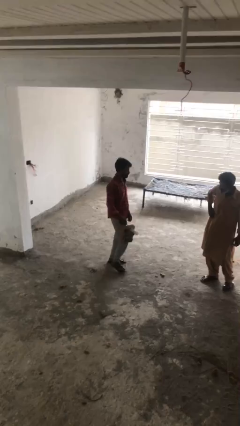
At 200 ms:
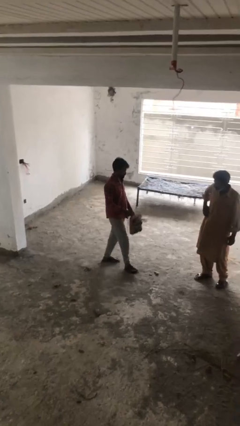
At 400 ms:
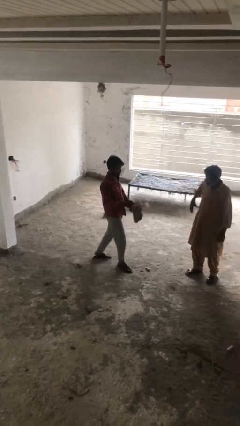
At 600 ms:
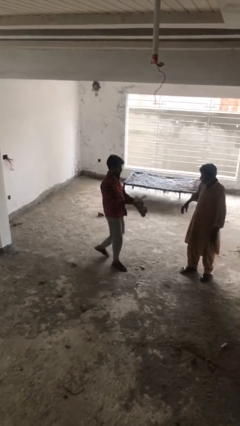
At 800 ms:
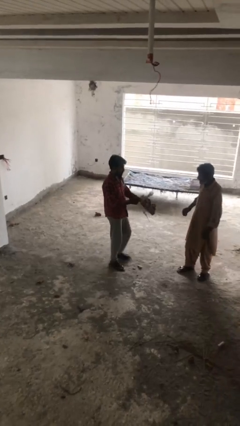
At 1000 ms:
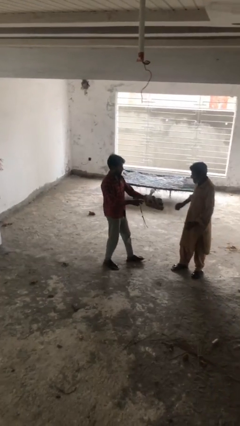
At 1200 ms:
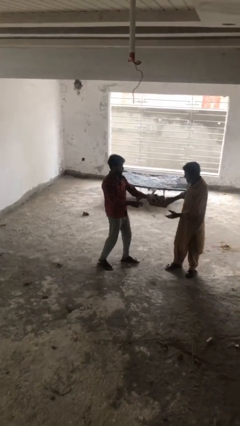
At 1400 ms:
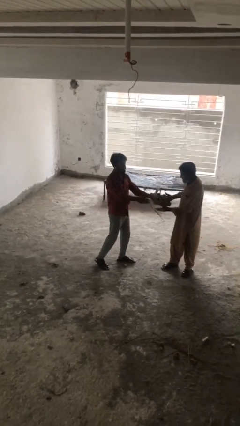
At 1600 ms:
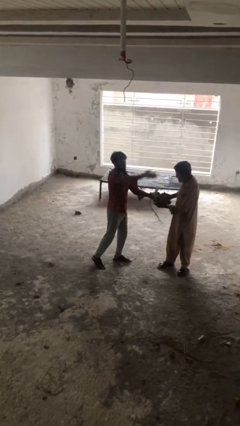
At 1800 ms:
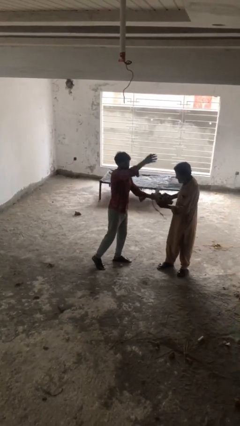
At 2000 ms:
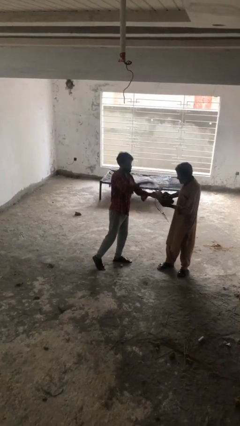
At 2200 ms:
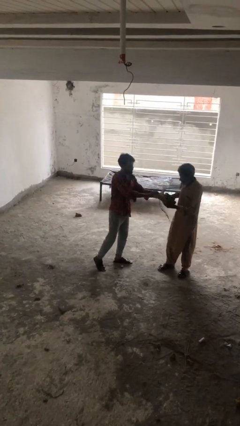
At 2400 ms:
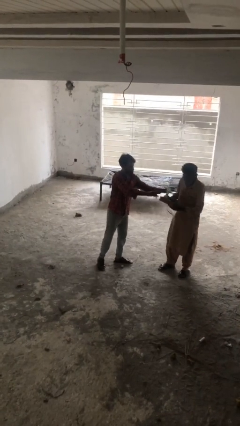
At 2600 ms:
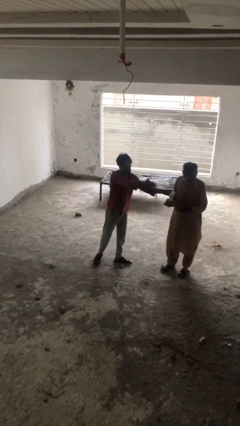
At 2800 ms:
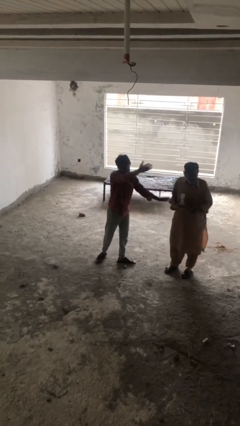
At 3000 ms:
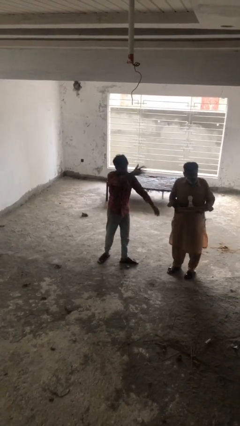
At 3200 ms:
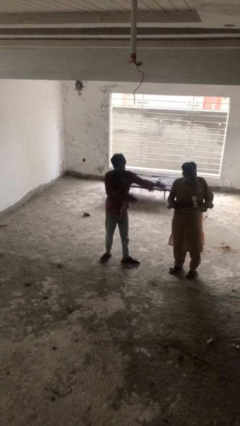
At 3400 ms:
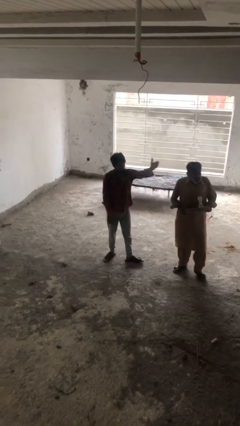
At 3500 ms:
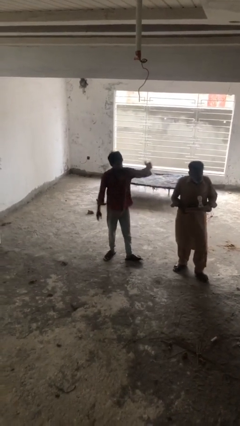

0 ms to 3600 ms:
person transfers object to person

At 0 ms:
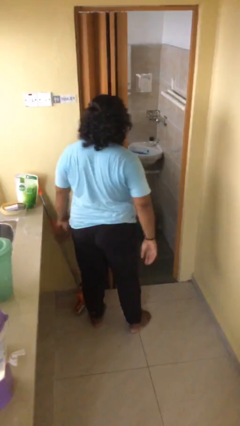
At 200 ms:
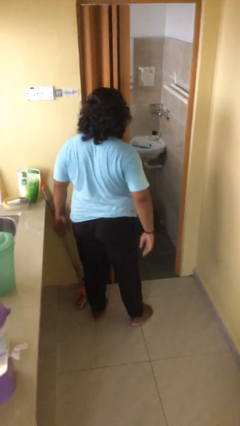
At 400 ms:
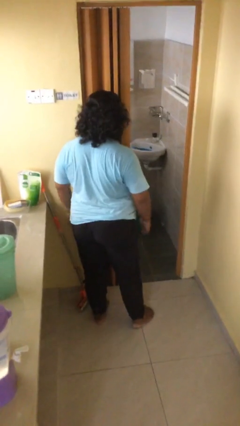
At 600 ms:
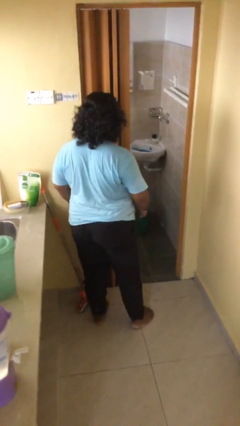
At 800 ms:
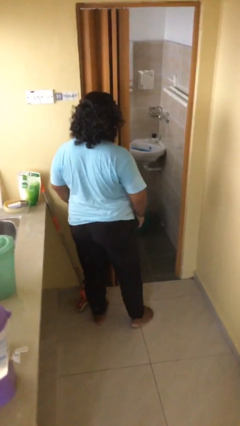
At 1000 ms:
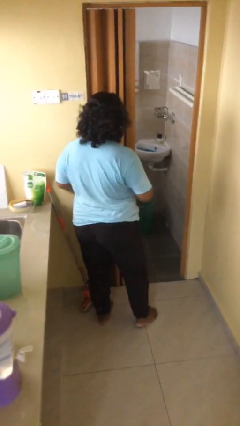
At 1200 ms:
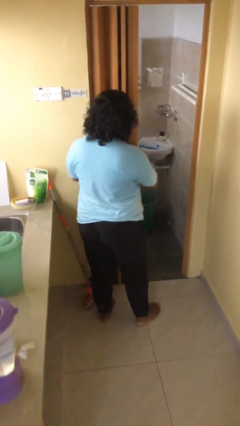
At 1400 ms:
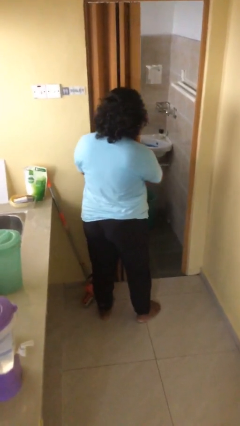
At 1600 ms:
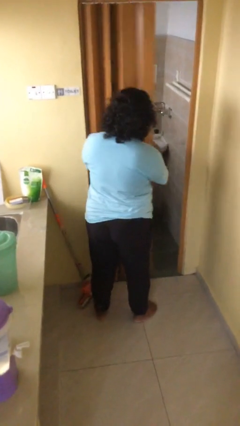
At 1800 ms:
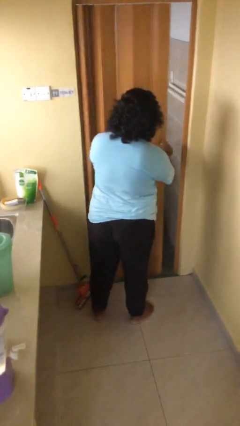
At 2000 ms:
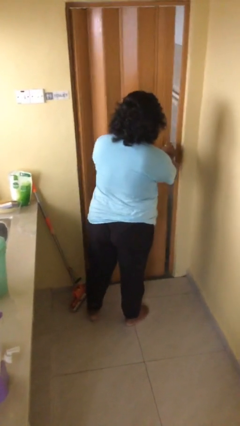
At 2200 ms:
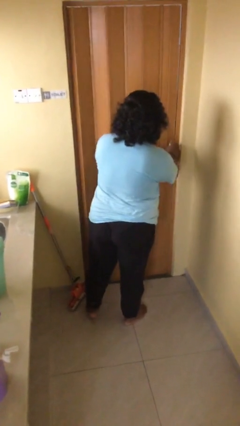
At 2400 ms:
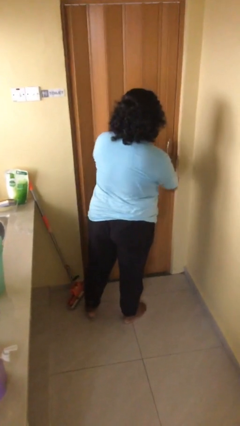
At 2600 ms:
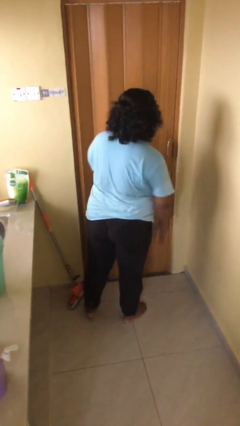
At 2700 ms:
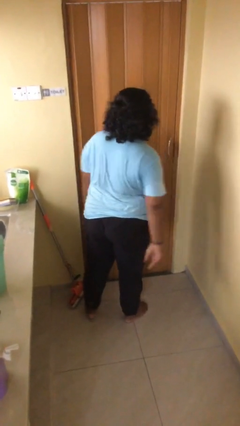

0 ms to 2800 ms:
person closes sliding door

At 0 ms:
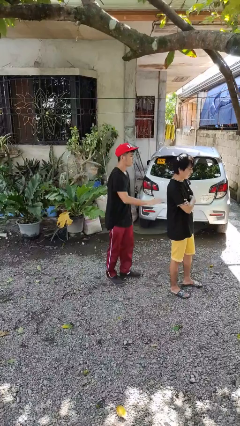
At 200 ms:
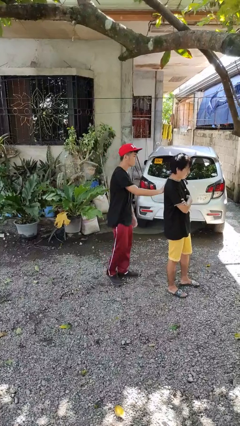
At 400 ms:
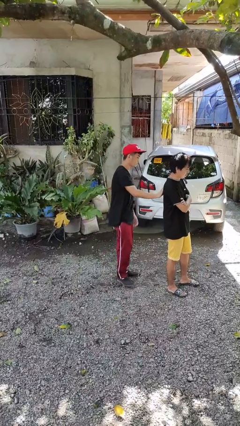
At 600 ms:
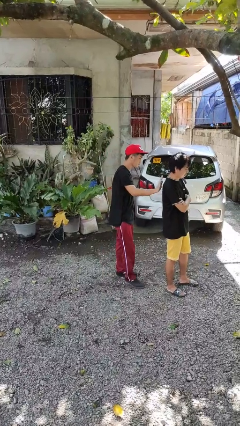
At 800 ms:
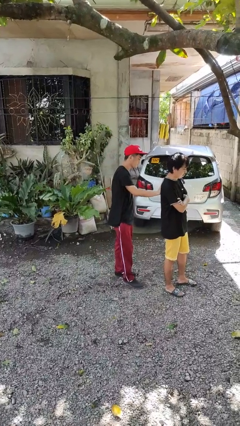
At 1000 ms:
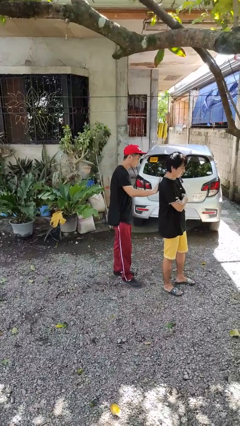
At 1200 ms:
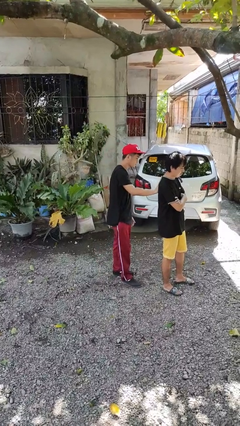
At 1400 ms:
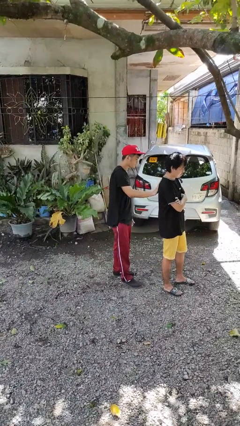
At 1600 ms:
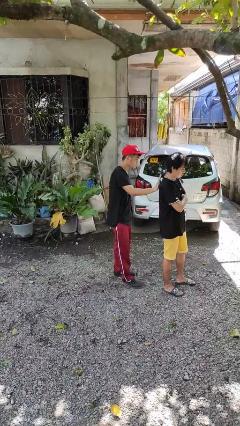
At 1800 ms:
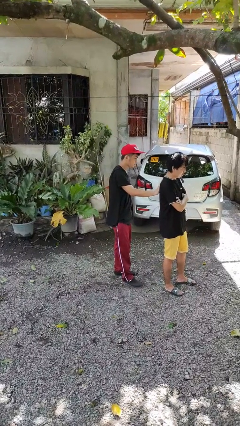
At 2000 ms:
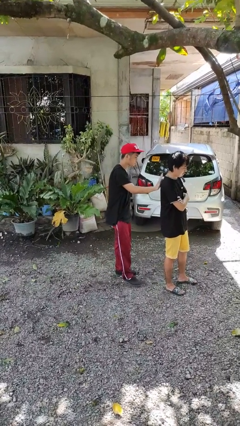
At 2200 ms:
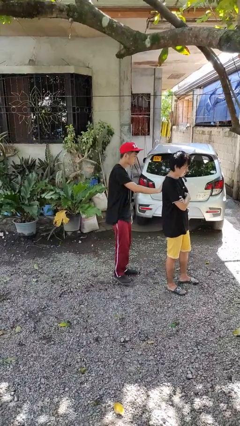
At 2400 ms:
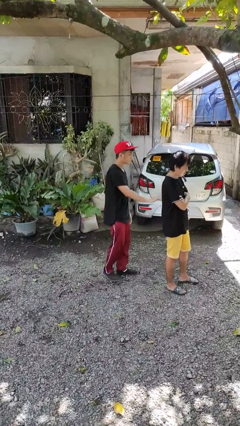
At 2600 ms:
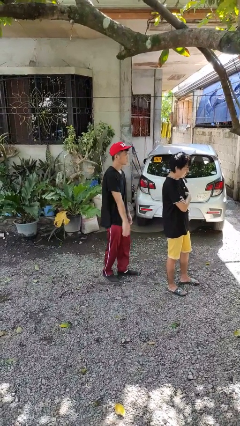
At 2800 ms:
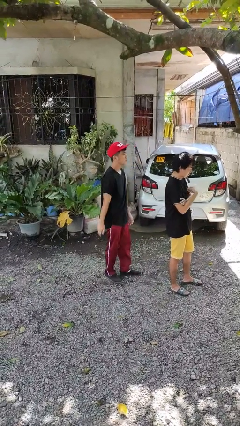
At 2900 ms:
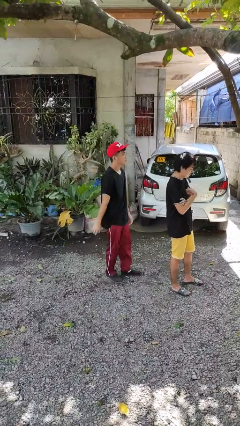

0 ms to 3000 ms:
person touches back of person

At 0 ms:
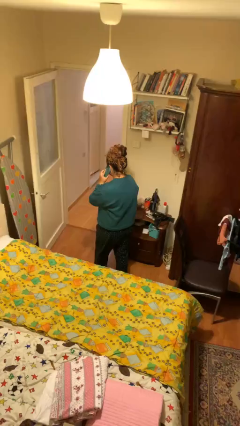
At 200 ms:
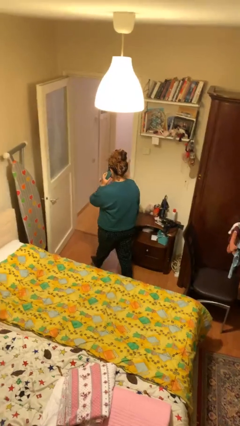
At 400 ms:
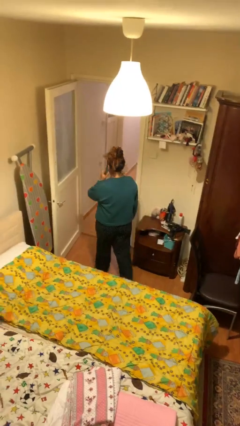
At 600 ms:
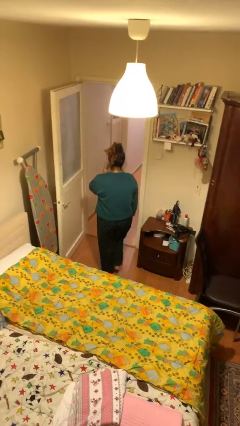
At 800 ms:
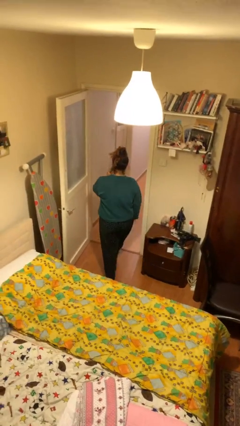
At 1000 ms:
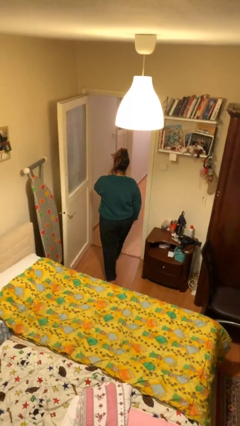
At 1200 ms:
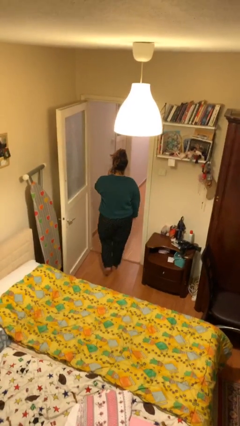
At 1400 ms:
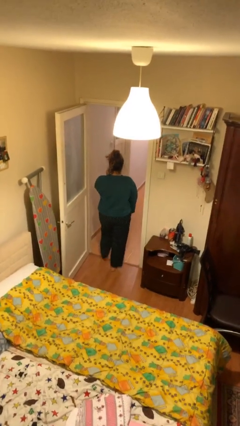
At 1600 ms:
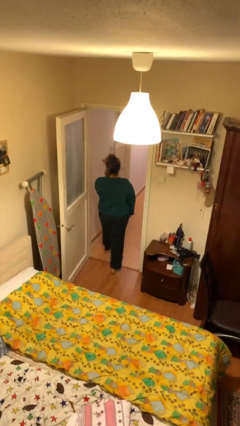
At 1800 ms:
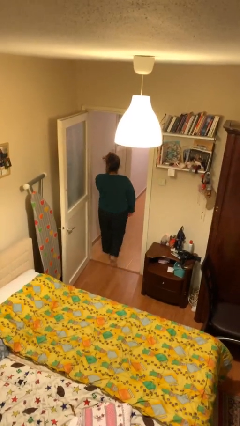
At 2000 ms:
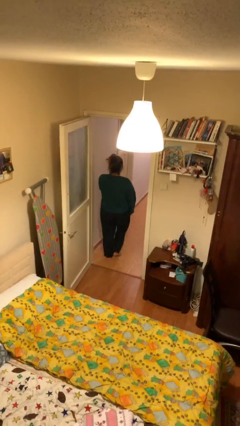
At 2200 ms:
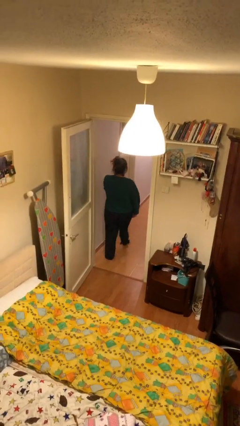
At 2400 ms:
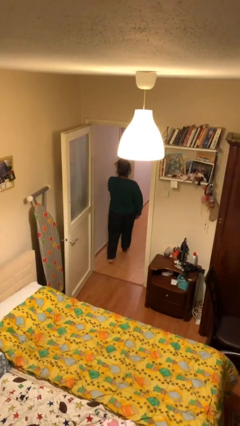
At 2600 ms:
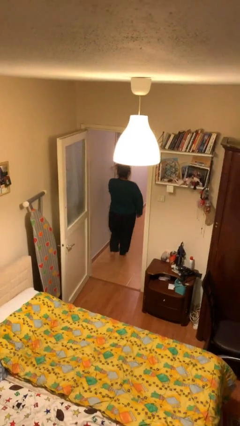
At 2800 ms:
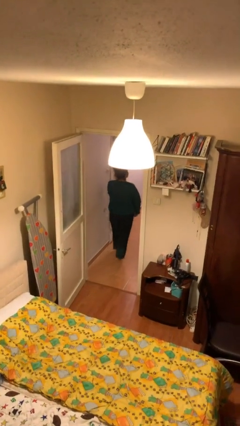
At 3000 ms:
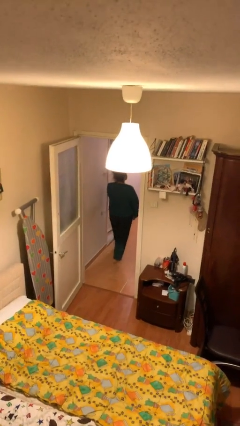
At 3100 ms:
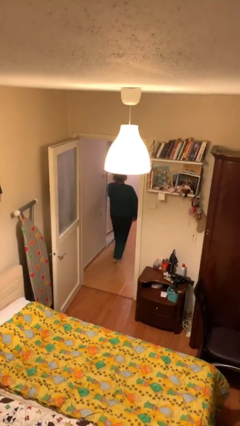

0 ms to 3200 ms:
person exits scene through structure

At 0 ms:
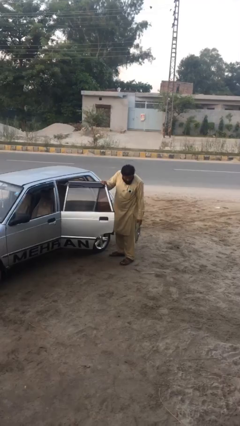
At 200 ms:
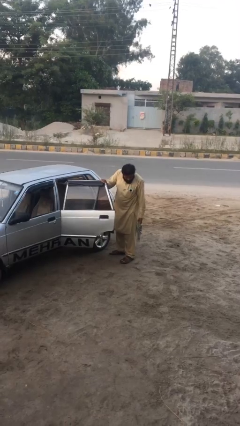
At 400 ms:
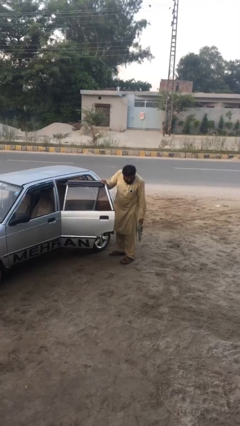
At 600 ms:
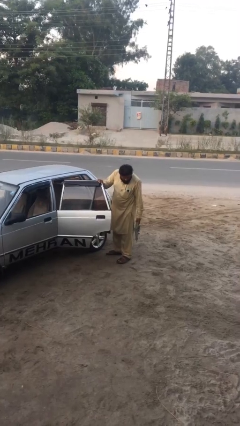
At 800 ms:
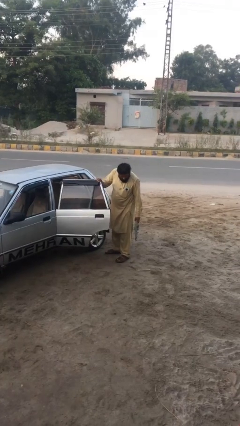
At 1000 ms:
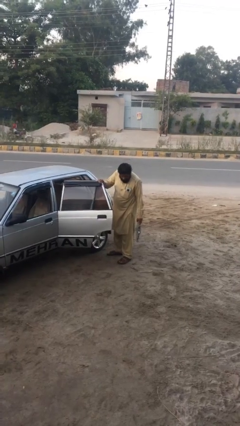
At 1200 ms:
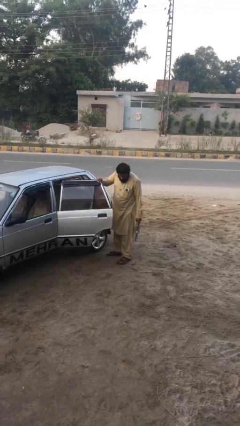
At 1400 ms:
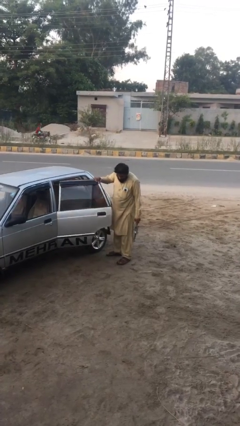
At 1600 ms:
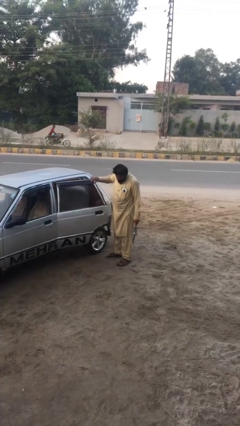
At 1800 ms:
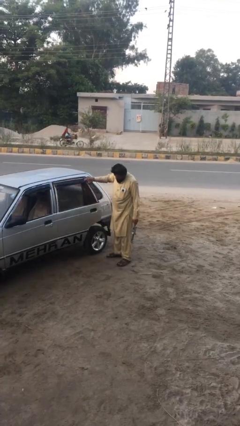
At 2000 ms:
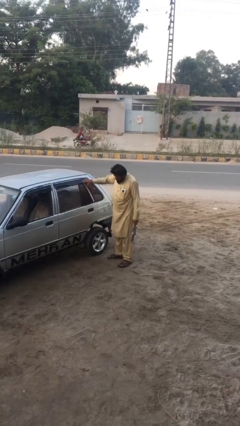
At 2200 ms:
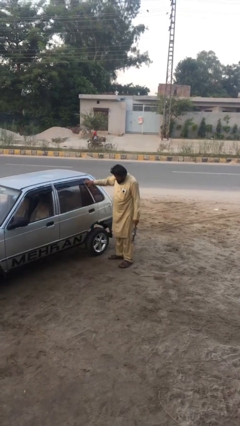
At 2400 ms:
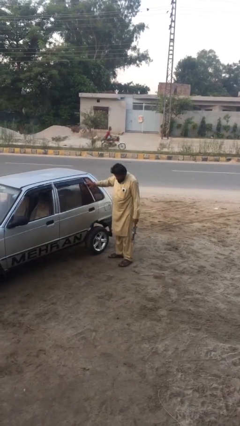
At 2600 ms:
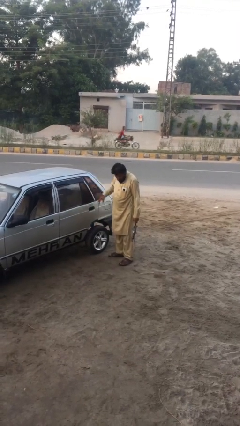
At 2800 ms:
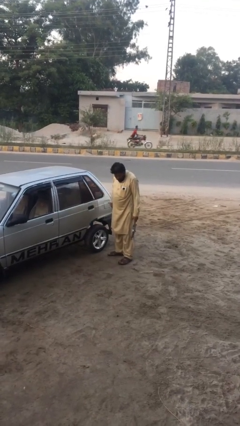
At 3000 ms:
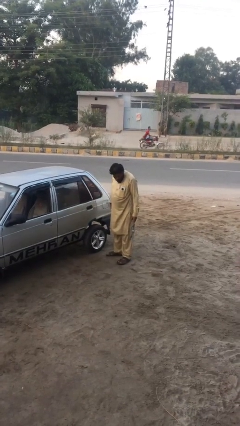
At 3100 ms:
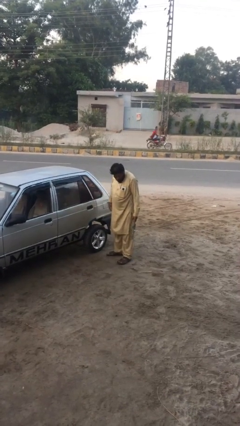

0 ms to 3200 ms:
person closes car door

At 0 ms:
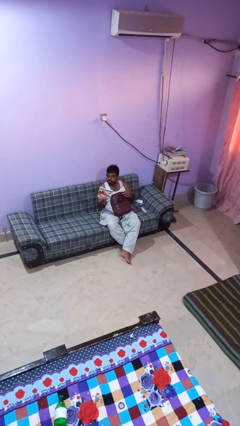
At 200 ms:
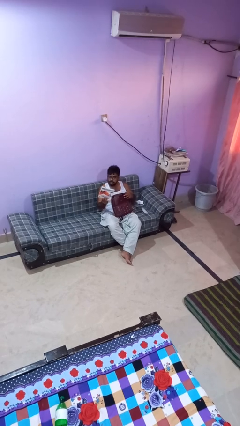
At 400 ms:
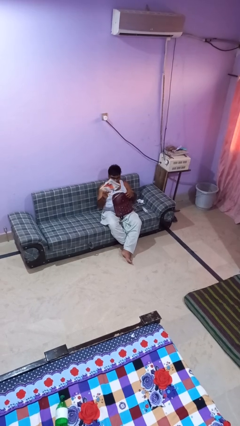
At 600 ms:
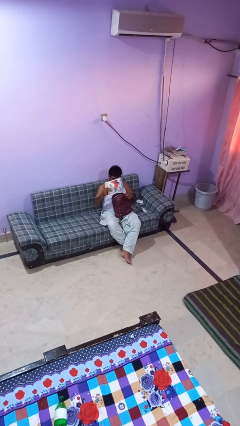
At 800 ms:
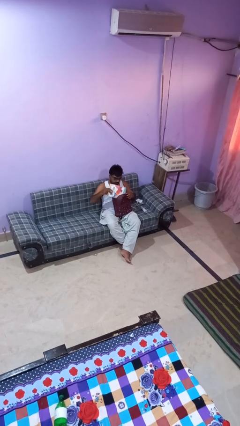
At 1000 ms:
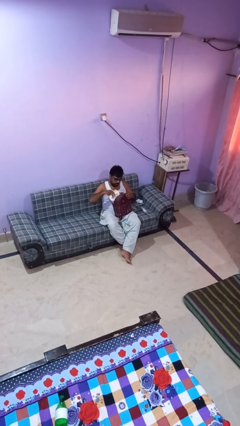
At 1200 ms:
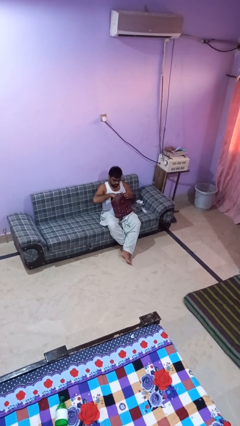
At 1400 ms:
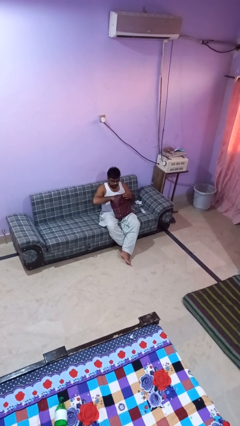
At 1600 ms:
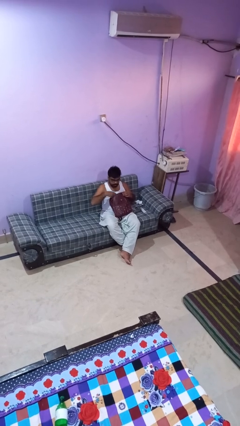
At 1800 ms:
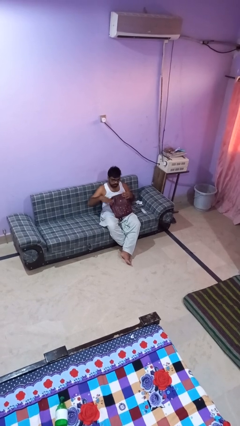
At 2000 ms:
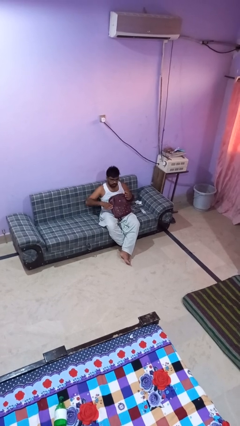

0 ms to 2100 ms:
person puts object into backpack
